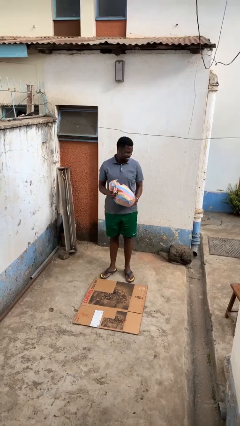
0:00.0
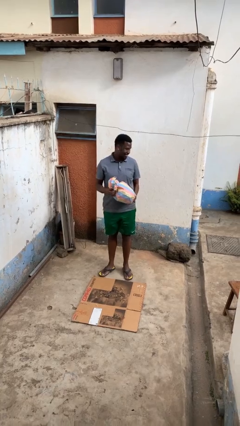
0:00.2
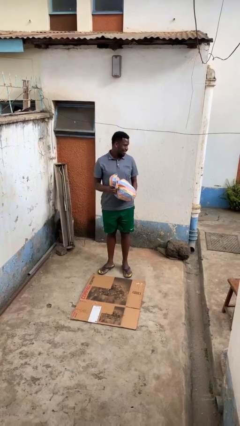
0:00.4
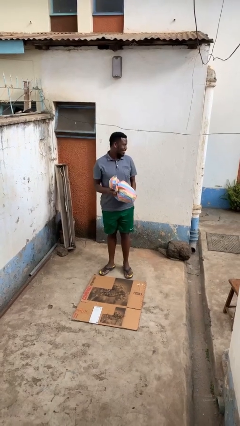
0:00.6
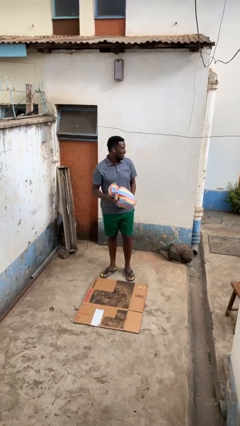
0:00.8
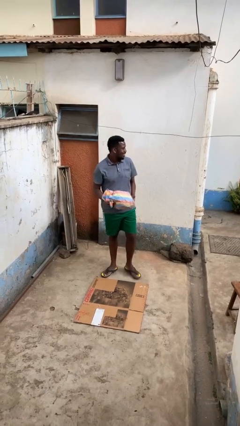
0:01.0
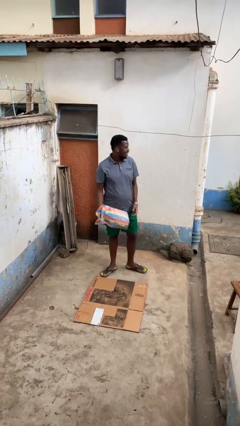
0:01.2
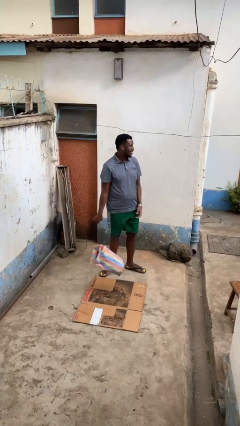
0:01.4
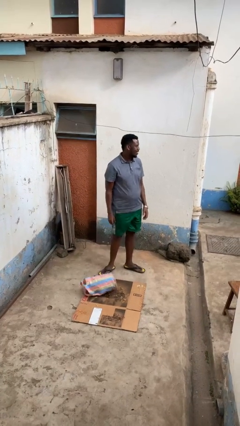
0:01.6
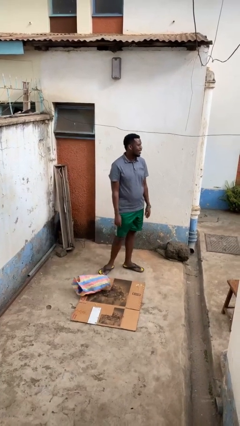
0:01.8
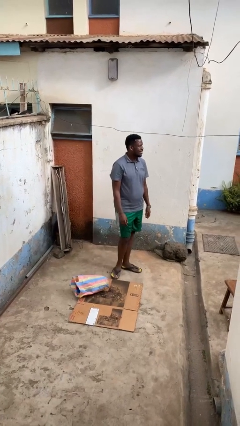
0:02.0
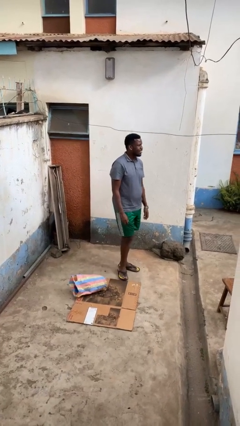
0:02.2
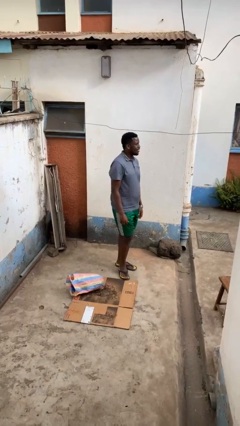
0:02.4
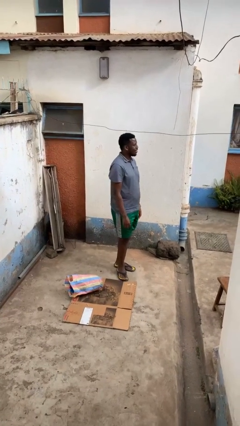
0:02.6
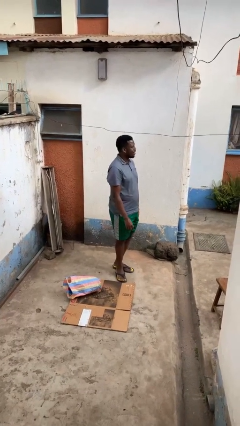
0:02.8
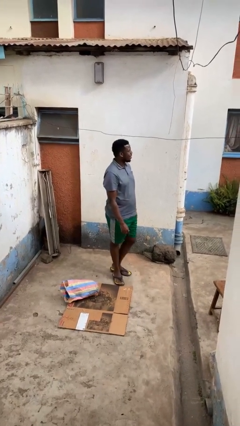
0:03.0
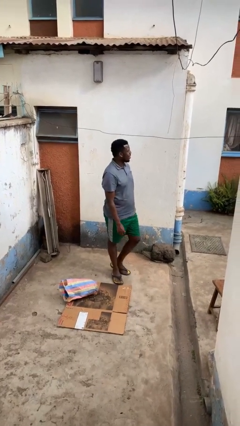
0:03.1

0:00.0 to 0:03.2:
person drops object

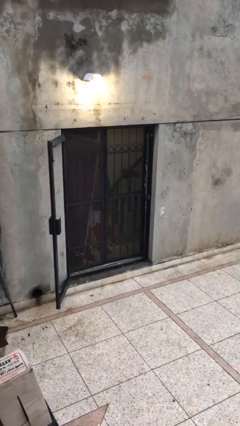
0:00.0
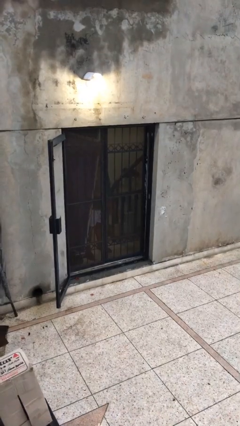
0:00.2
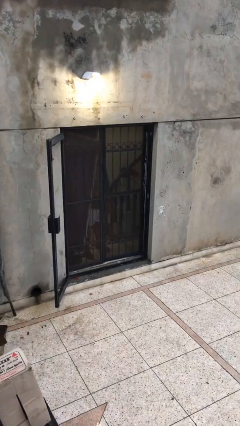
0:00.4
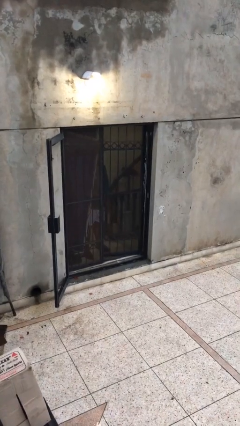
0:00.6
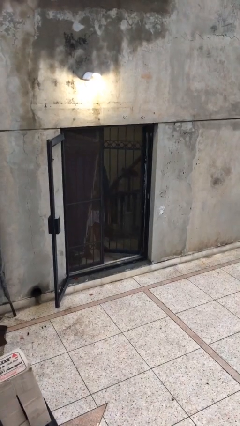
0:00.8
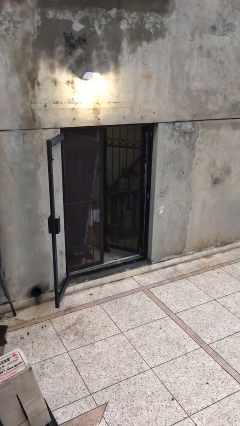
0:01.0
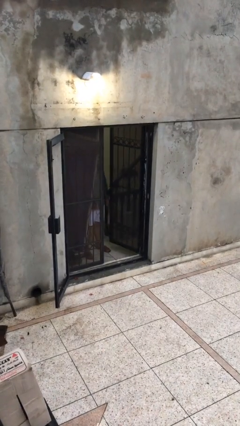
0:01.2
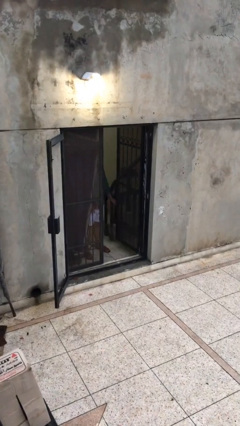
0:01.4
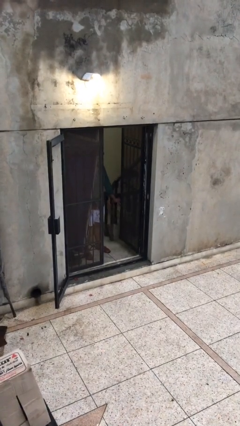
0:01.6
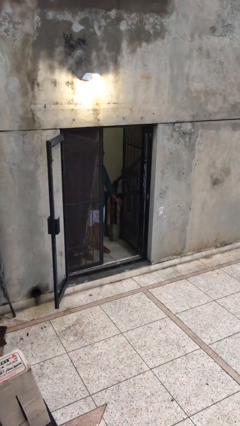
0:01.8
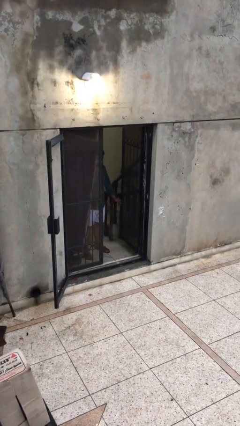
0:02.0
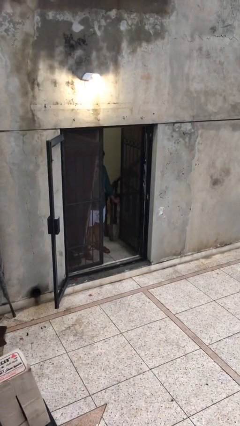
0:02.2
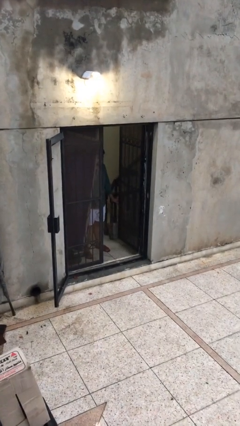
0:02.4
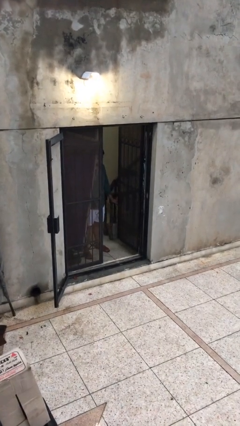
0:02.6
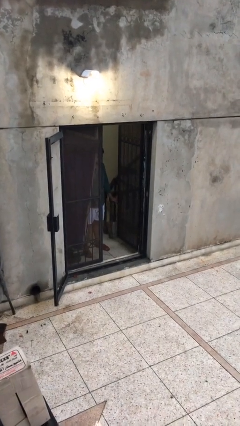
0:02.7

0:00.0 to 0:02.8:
person opens facility door

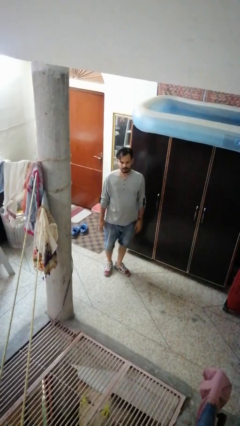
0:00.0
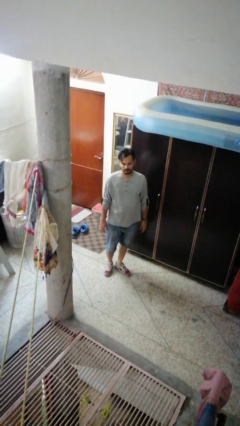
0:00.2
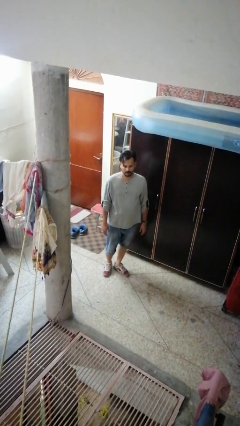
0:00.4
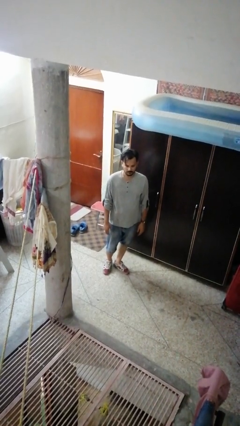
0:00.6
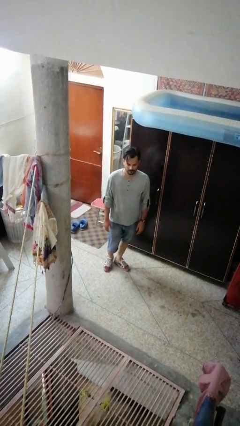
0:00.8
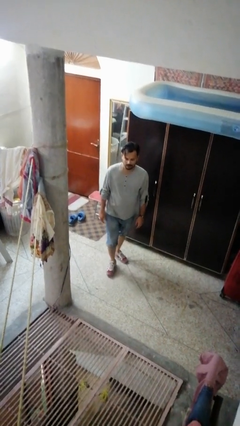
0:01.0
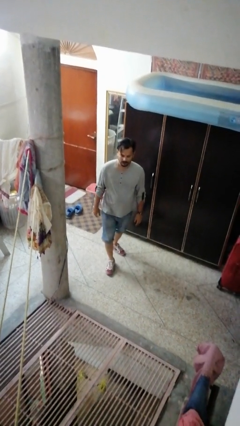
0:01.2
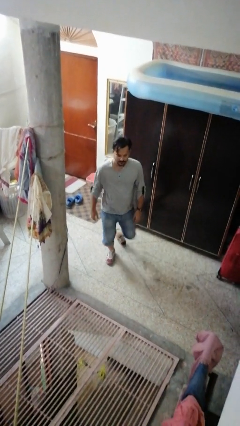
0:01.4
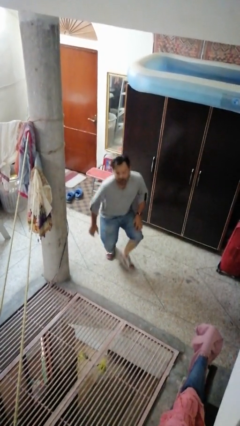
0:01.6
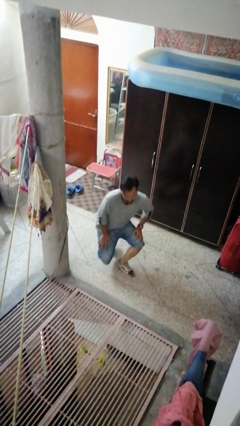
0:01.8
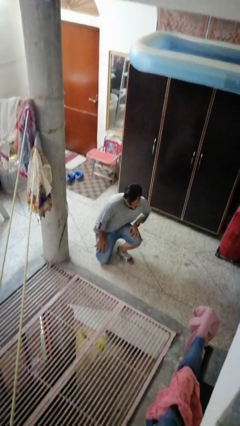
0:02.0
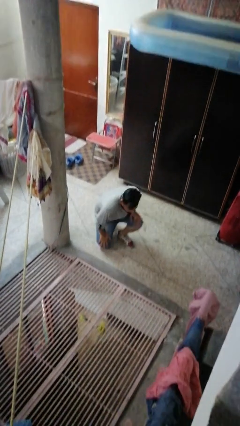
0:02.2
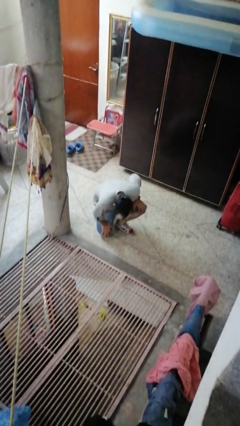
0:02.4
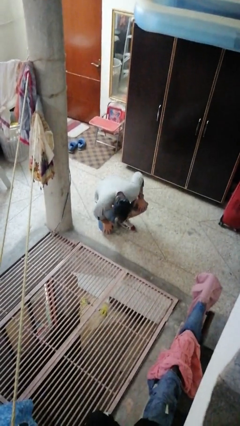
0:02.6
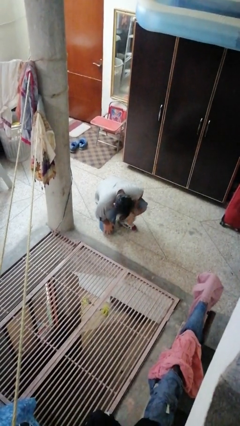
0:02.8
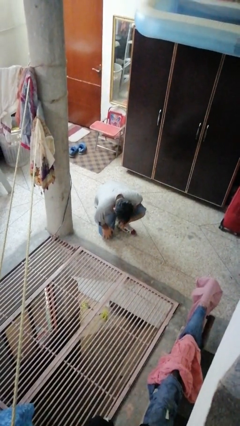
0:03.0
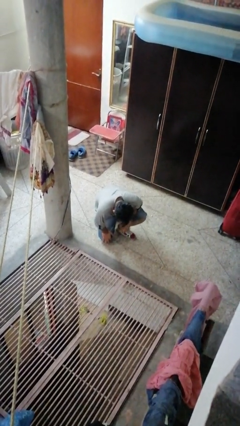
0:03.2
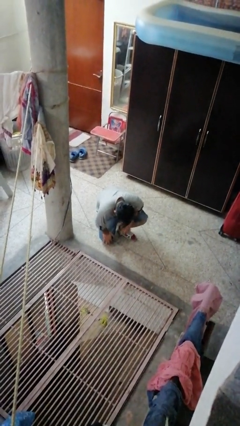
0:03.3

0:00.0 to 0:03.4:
person falls while standing

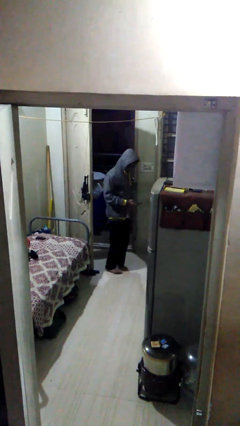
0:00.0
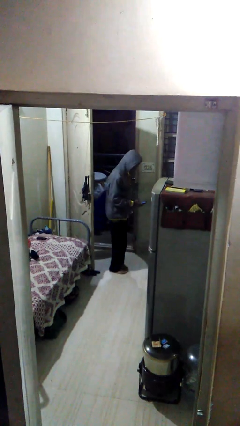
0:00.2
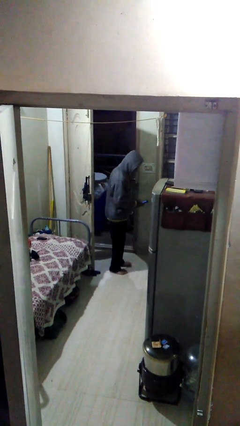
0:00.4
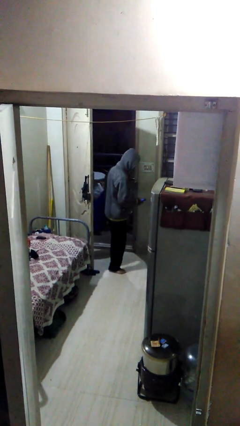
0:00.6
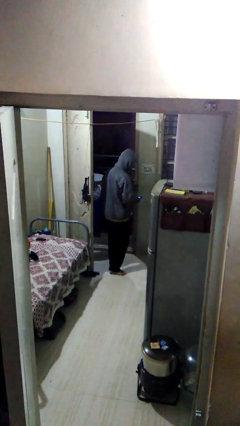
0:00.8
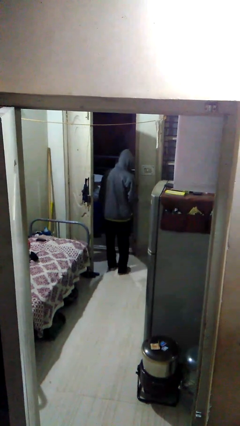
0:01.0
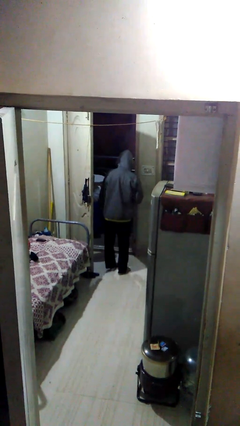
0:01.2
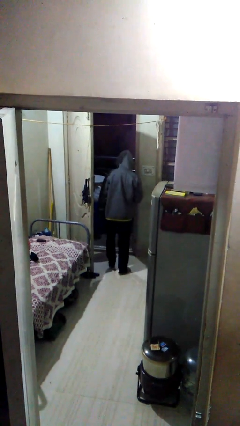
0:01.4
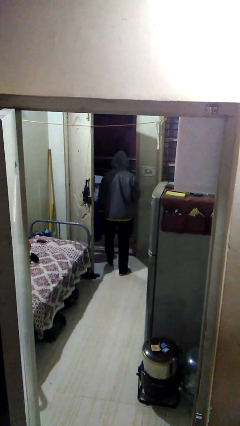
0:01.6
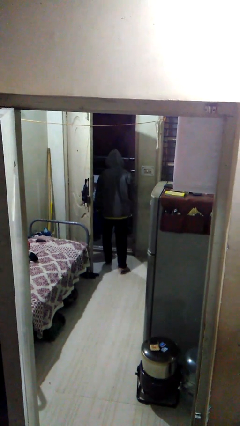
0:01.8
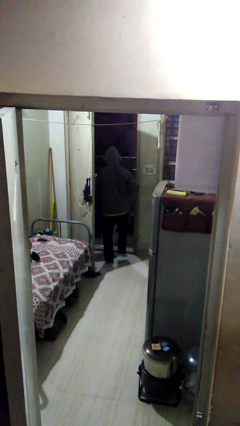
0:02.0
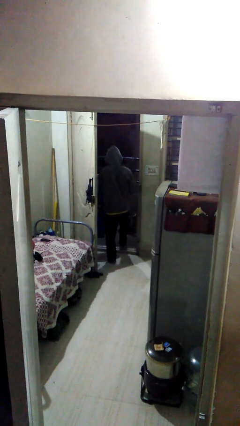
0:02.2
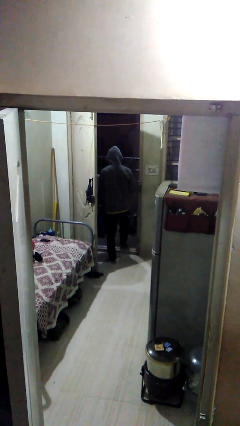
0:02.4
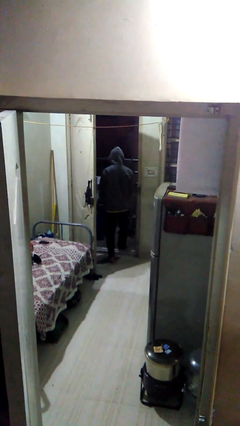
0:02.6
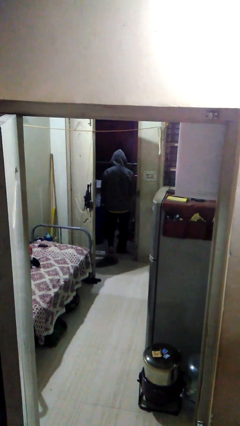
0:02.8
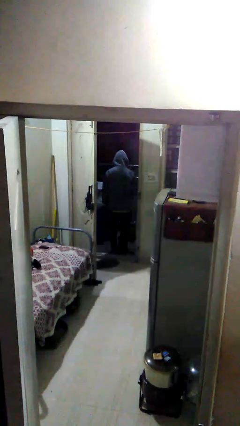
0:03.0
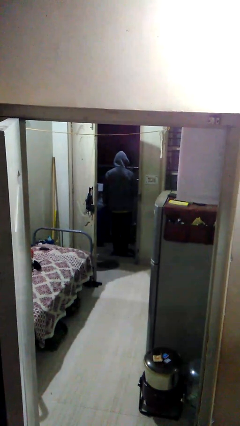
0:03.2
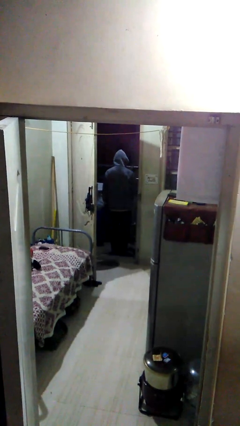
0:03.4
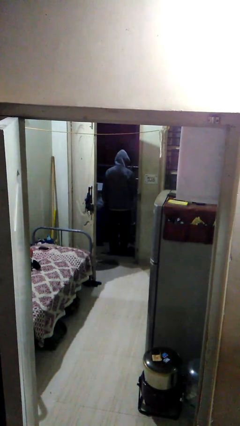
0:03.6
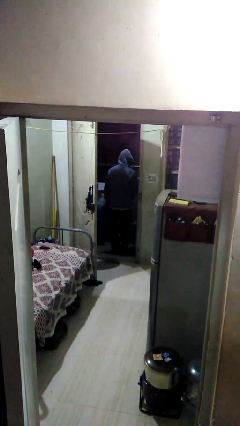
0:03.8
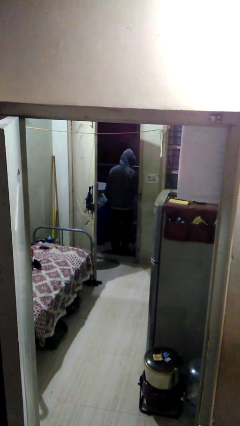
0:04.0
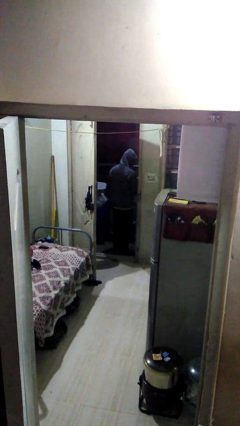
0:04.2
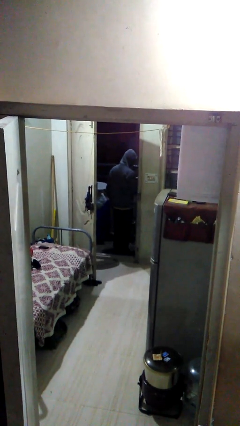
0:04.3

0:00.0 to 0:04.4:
person exits scene through structure

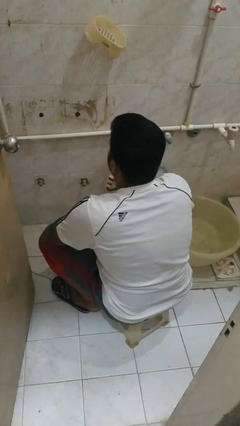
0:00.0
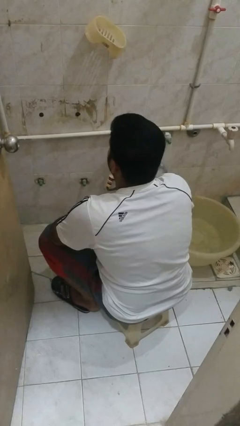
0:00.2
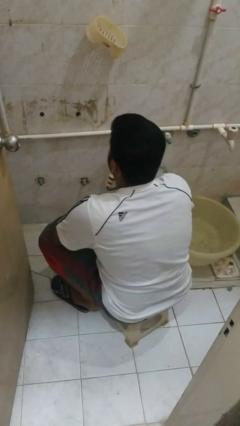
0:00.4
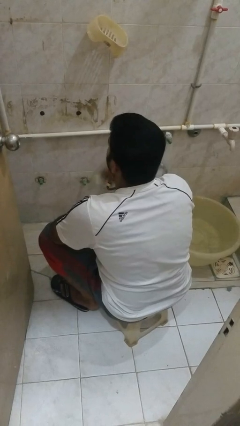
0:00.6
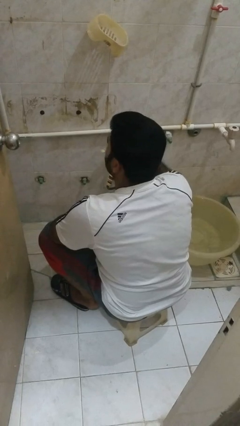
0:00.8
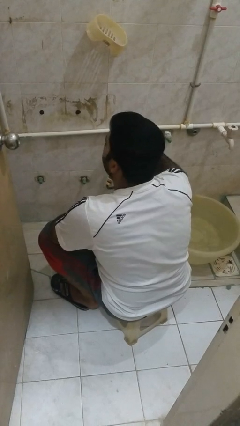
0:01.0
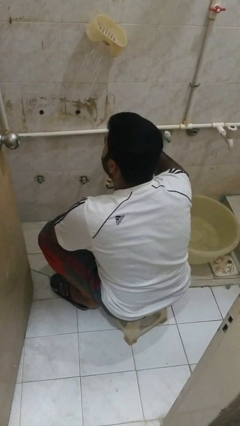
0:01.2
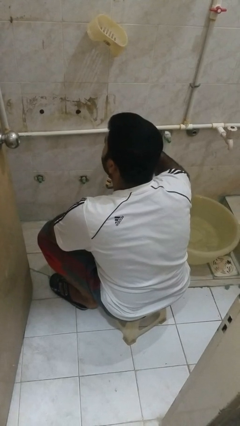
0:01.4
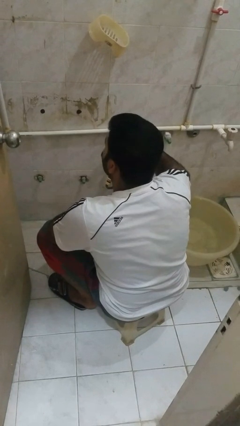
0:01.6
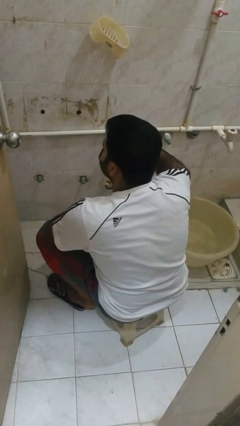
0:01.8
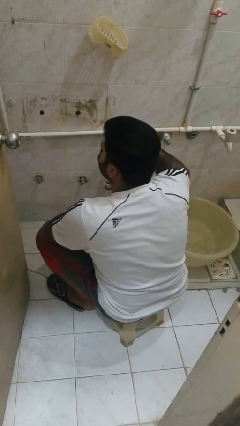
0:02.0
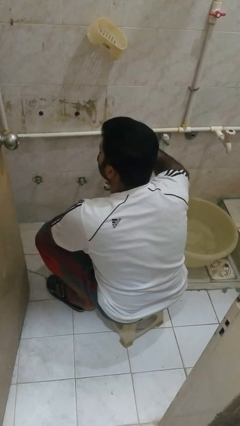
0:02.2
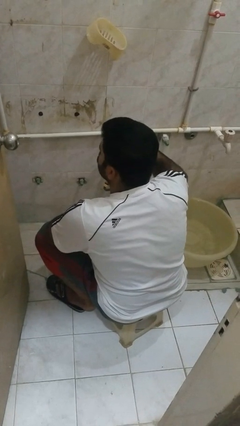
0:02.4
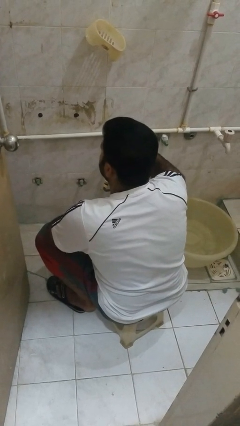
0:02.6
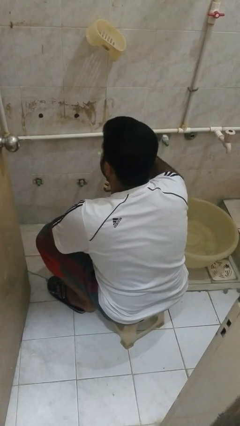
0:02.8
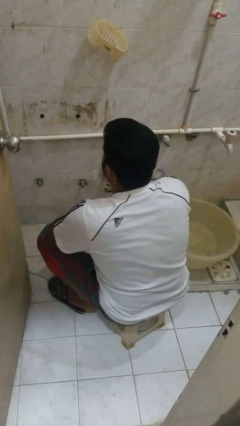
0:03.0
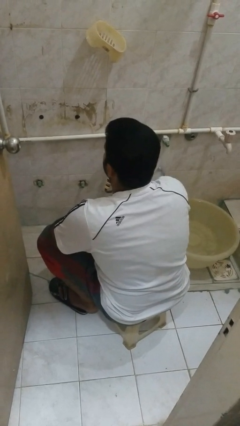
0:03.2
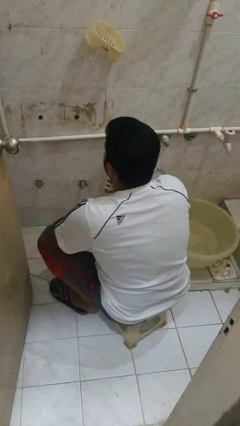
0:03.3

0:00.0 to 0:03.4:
person brushes teeth

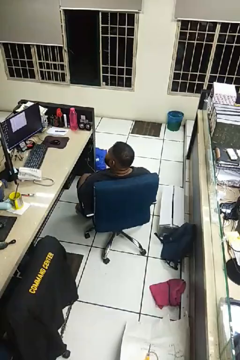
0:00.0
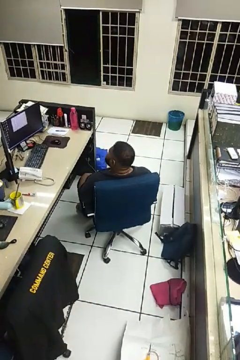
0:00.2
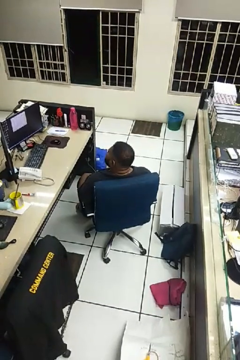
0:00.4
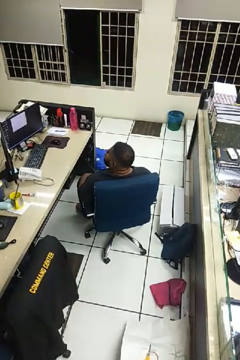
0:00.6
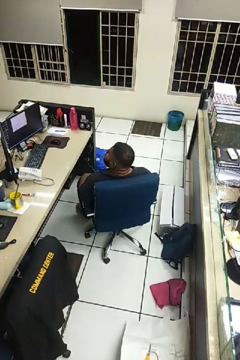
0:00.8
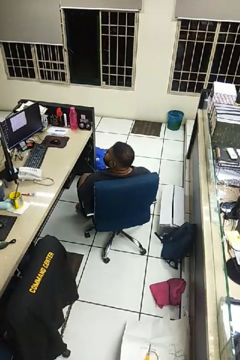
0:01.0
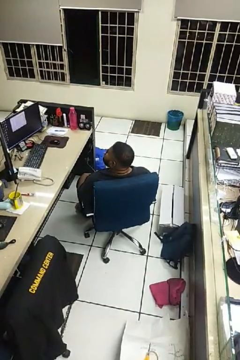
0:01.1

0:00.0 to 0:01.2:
person sticks out tongue
